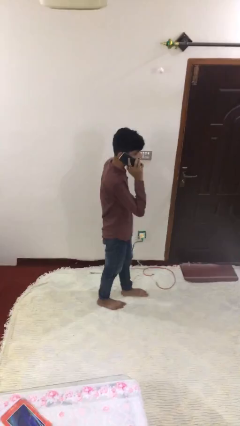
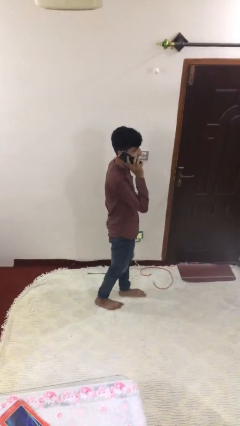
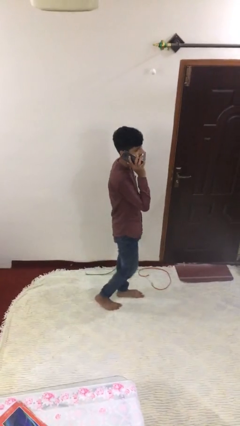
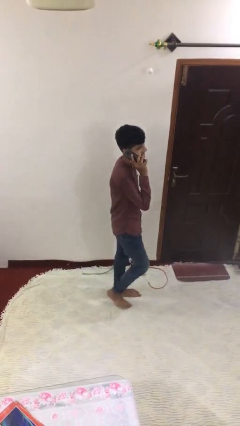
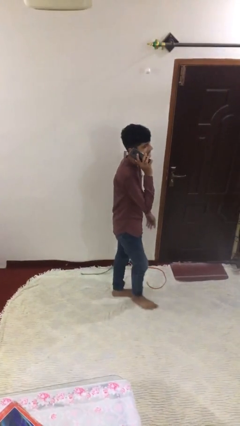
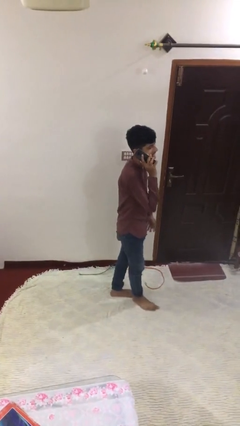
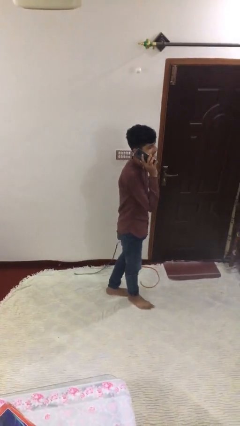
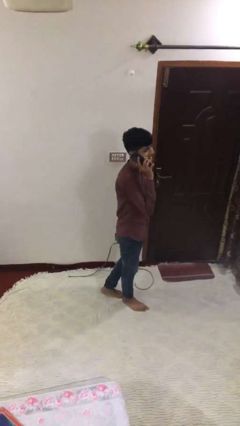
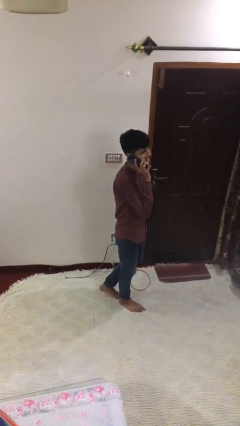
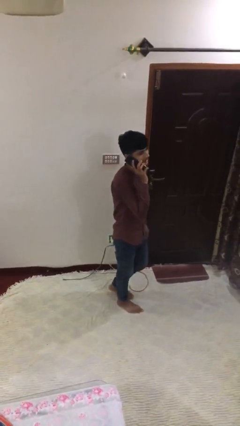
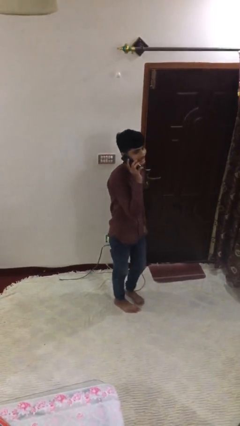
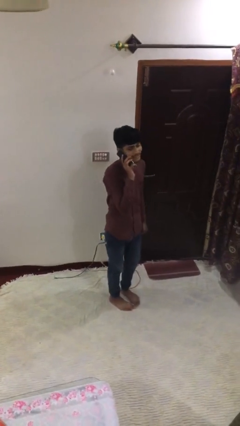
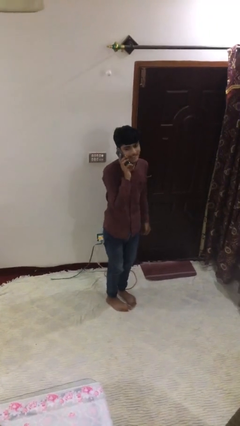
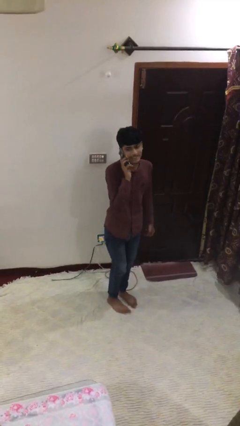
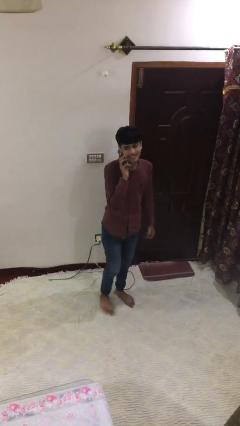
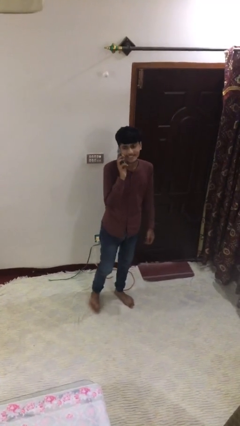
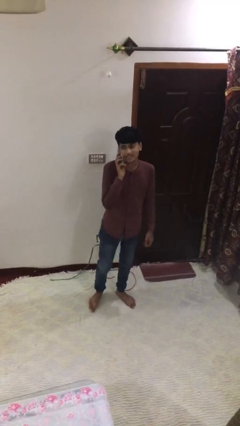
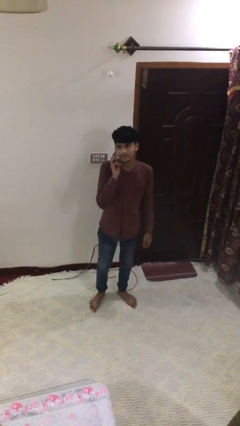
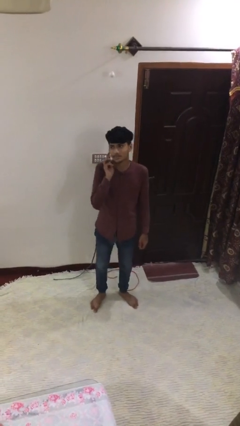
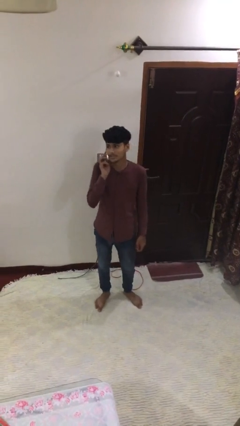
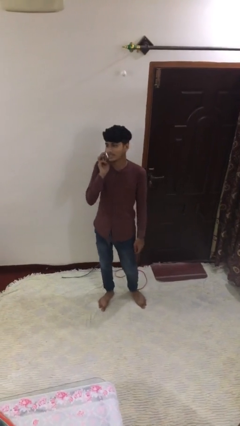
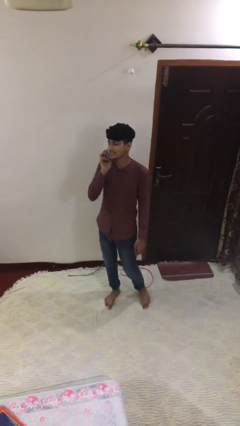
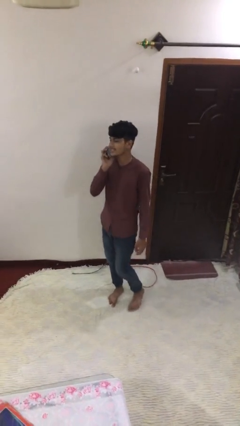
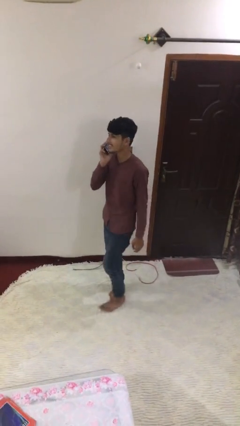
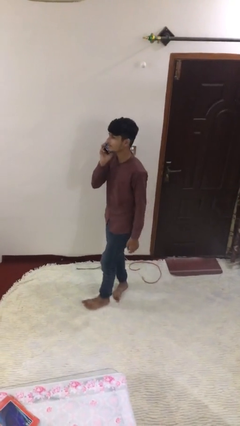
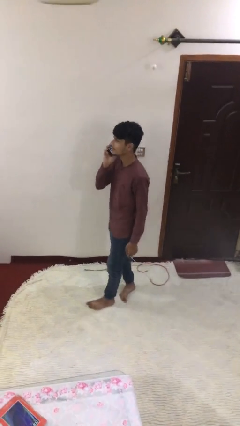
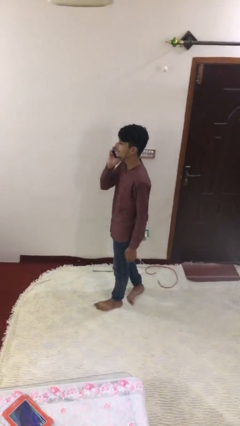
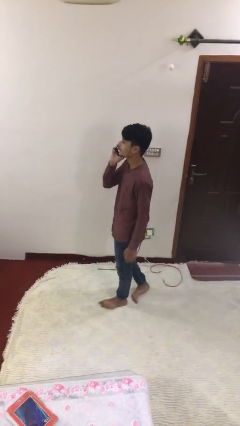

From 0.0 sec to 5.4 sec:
person talks on phone

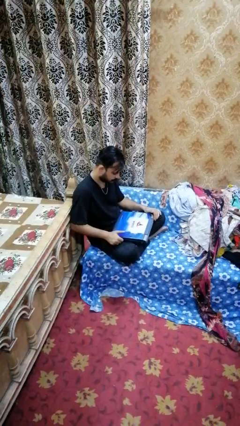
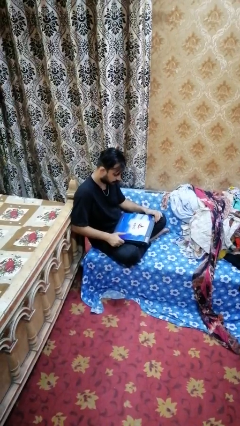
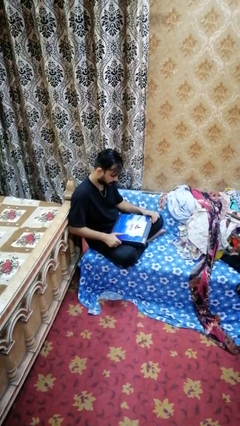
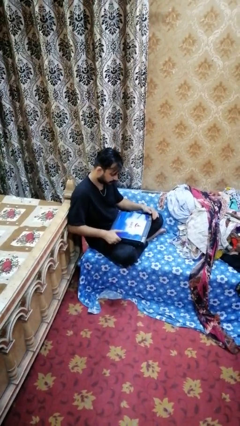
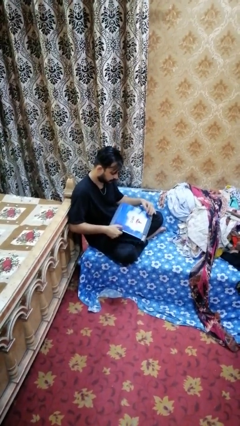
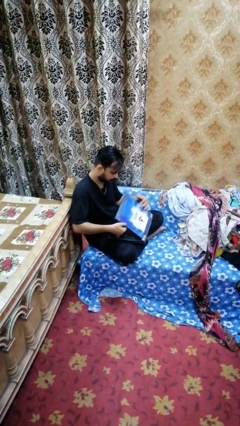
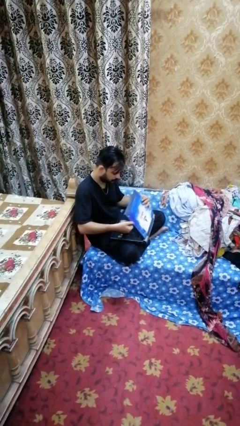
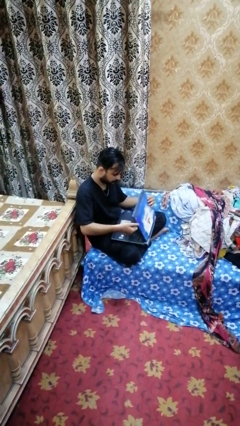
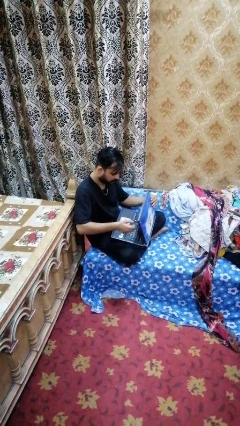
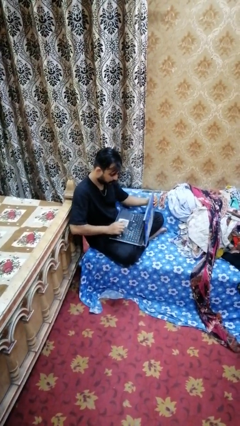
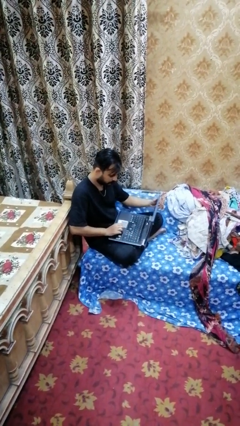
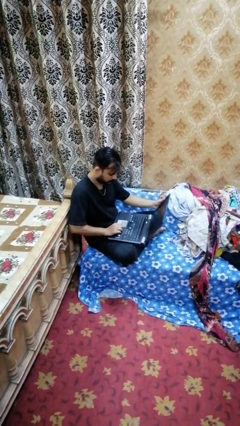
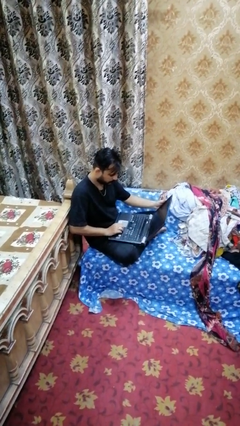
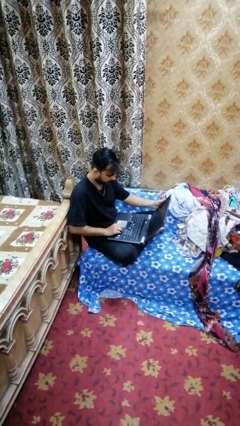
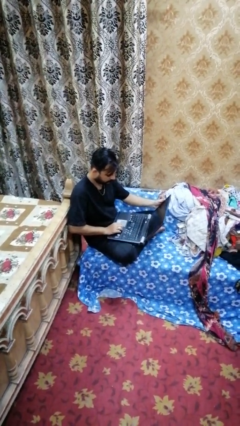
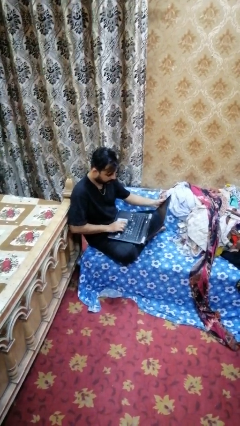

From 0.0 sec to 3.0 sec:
person opens laptop

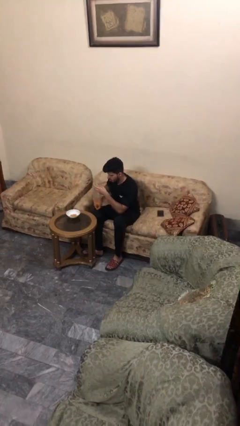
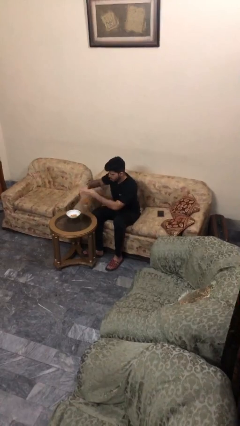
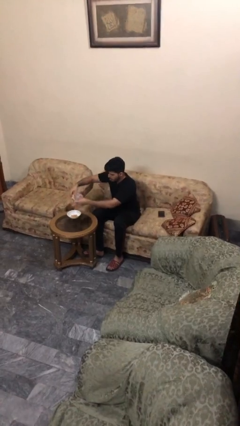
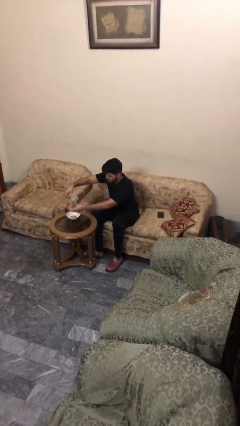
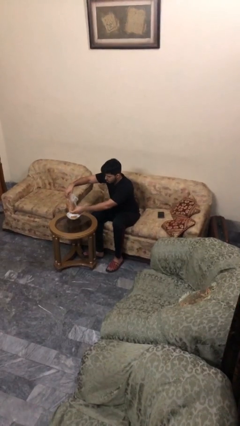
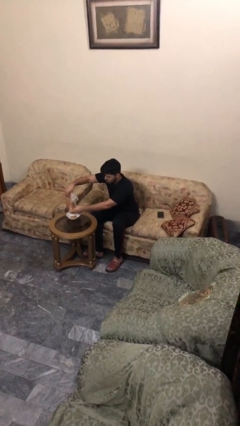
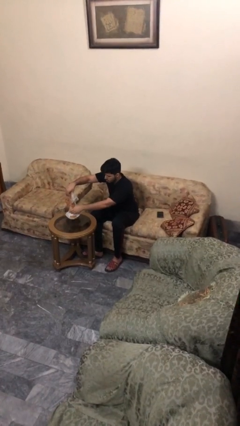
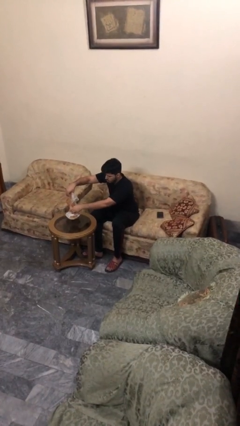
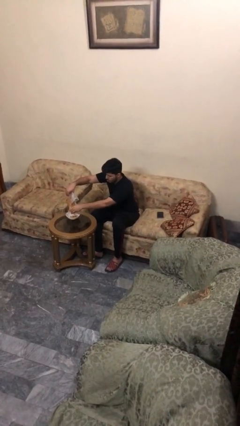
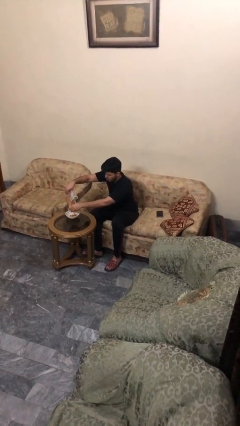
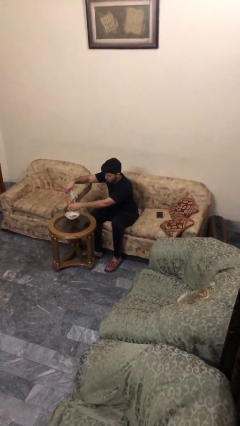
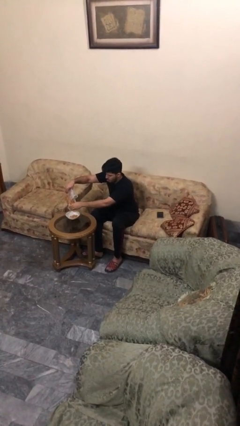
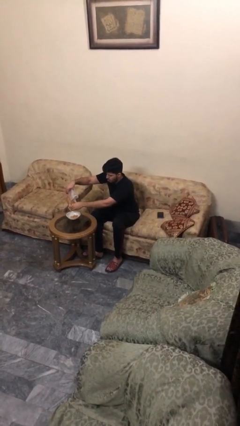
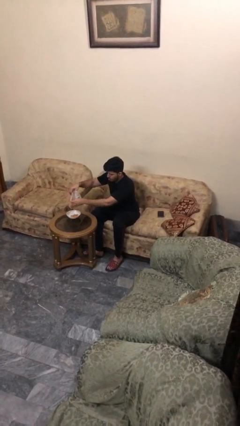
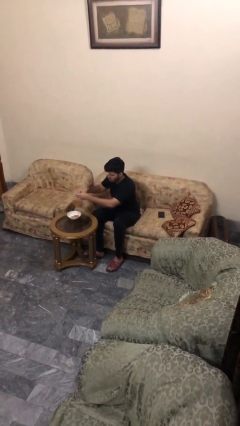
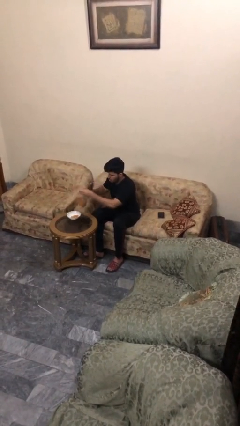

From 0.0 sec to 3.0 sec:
person pours into bowl

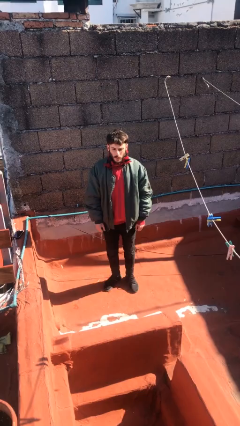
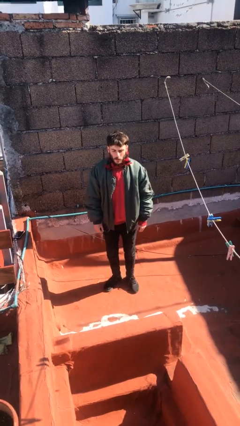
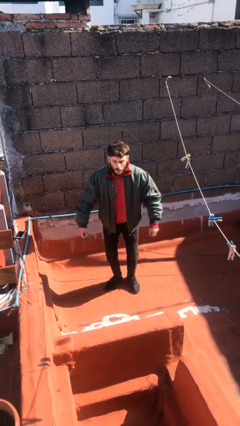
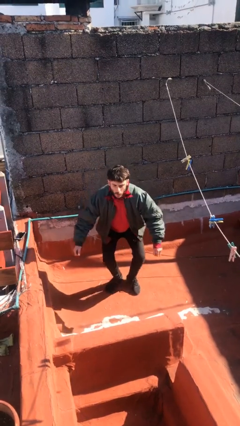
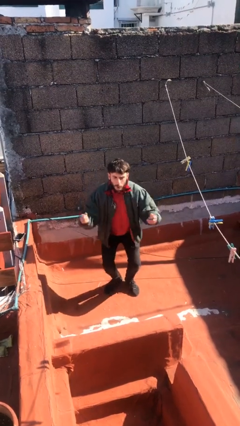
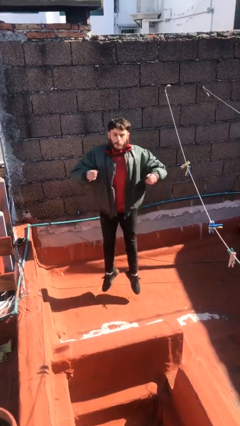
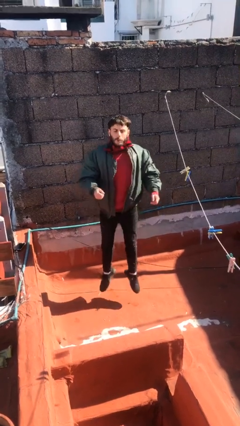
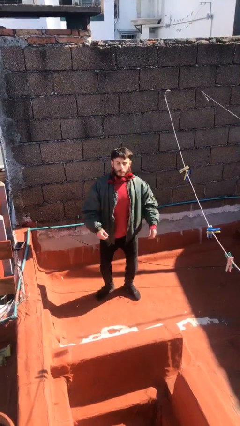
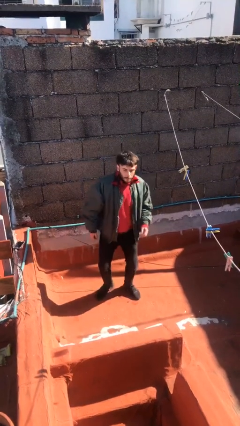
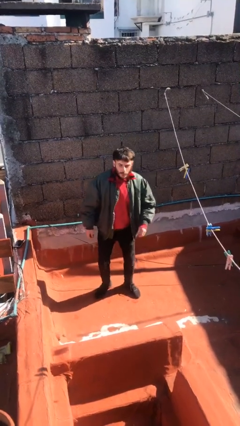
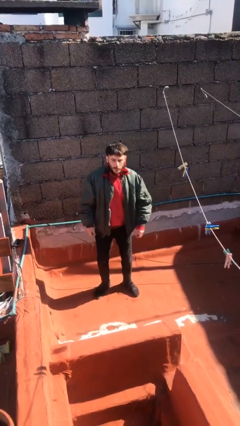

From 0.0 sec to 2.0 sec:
person jumps

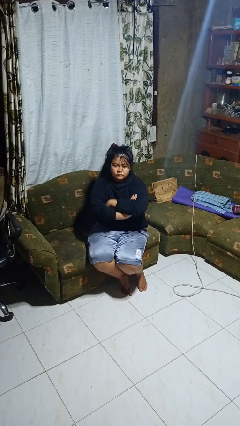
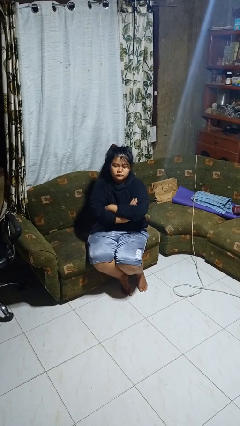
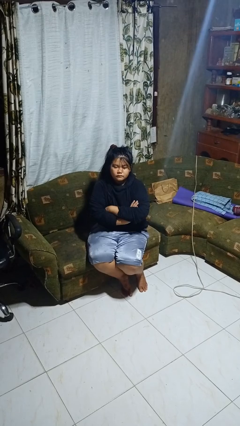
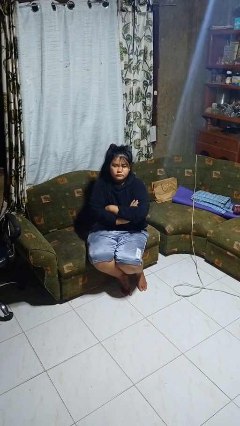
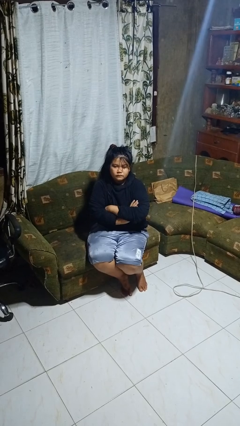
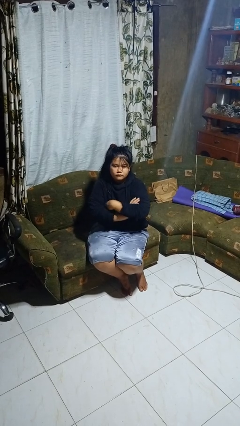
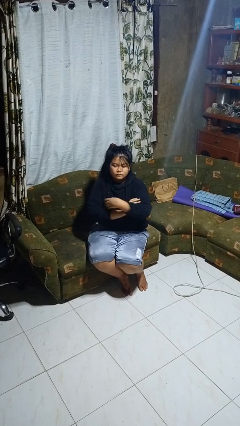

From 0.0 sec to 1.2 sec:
person crosses arms

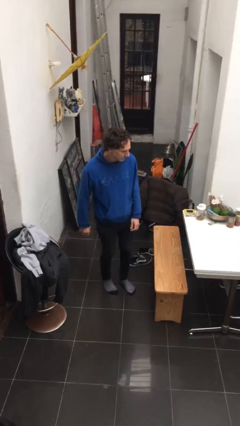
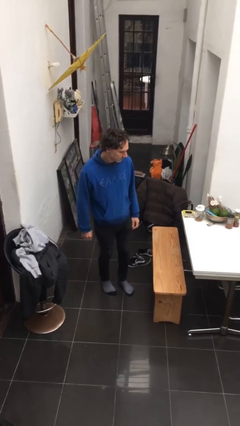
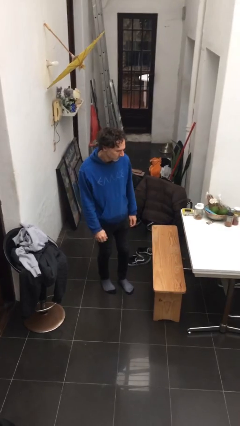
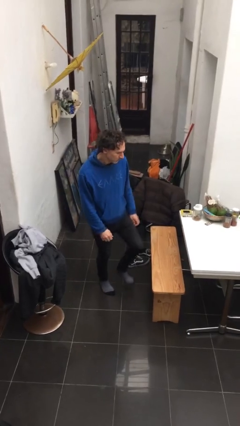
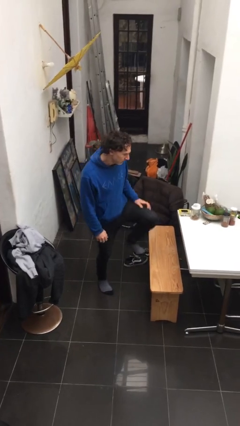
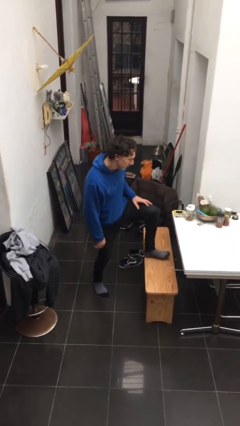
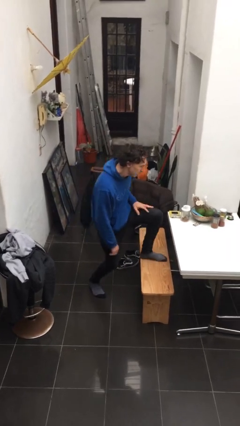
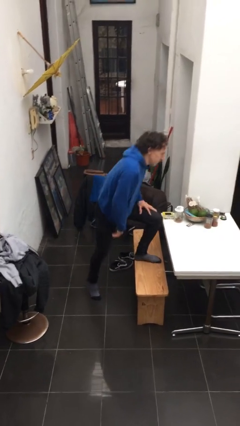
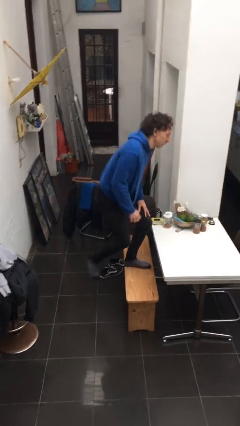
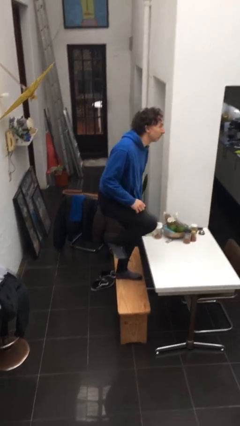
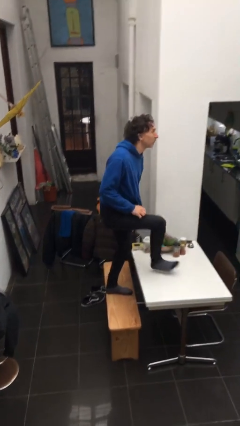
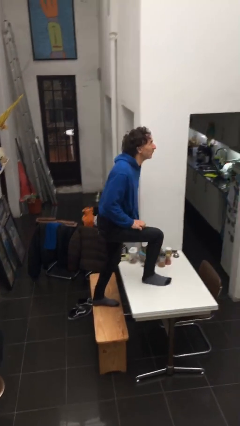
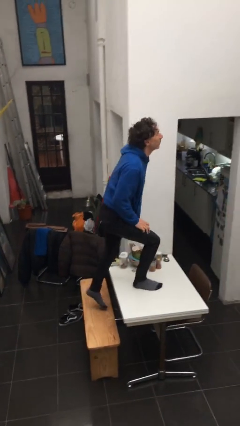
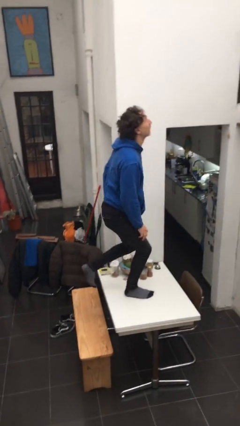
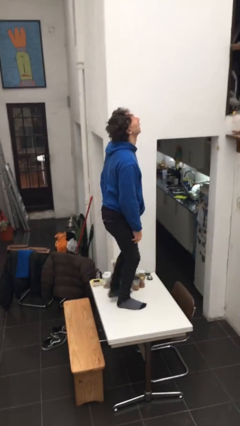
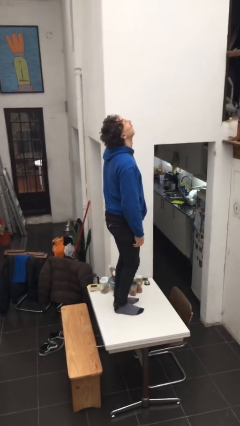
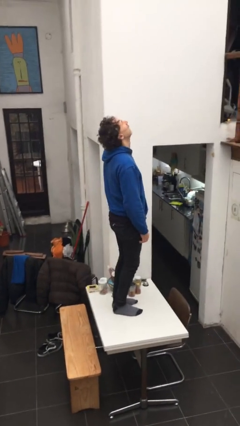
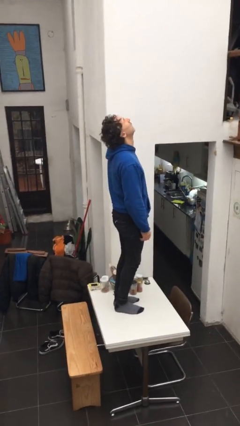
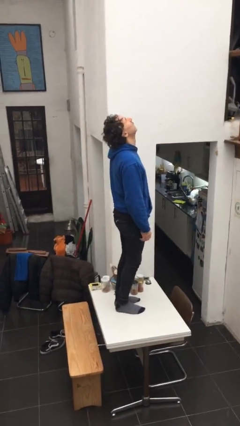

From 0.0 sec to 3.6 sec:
person climbs on table
